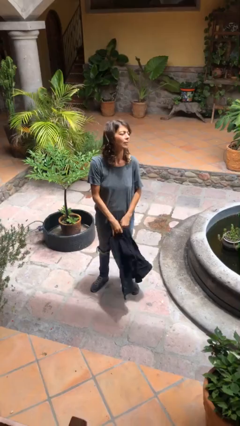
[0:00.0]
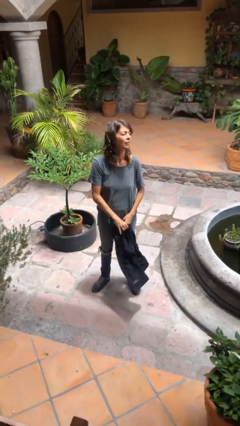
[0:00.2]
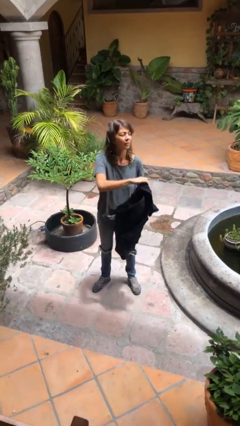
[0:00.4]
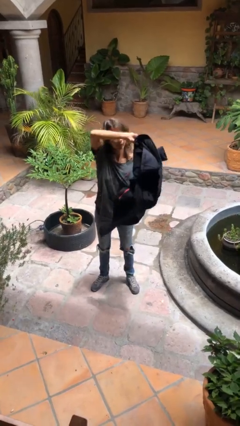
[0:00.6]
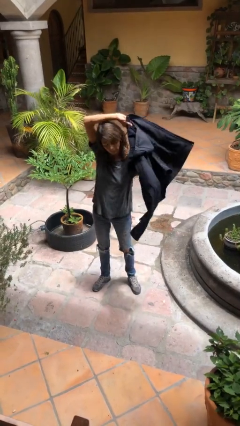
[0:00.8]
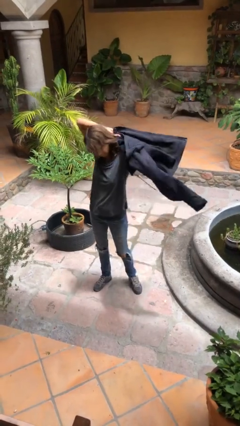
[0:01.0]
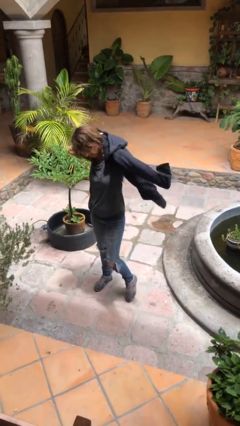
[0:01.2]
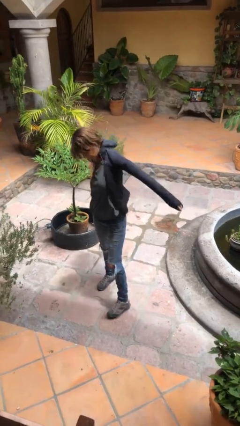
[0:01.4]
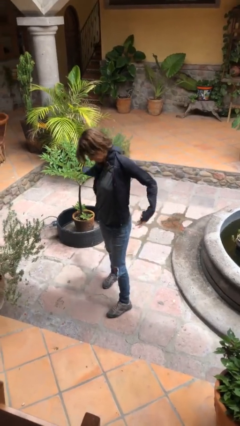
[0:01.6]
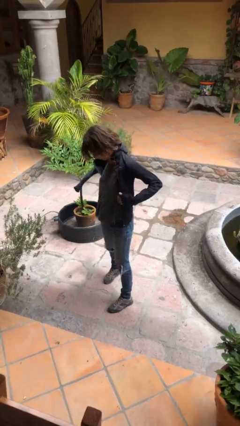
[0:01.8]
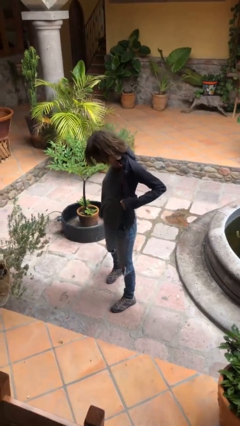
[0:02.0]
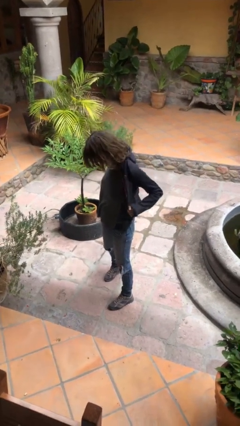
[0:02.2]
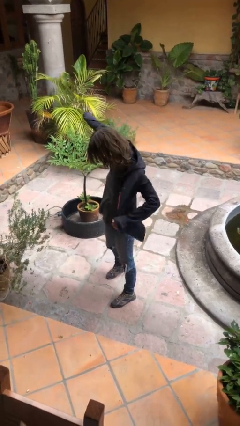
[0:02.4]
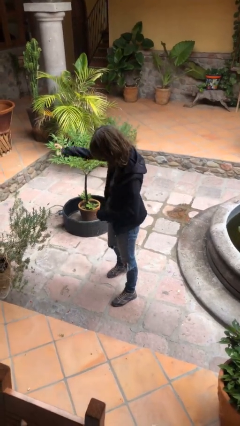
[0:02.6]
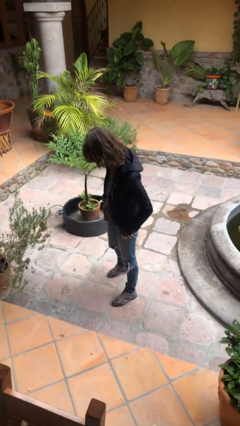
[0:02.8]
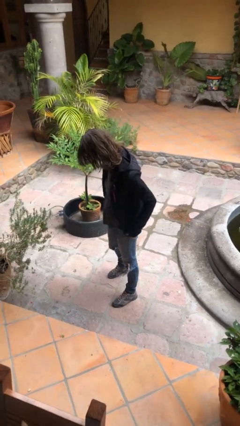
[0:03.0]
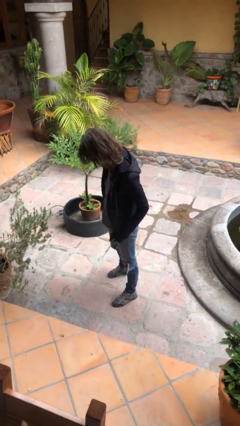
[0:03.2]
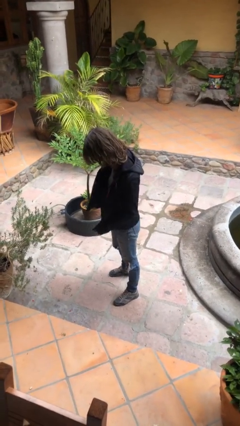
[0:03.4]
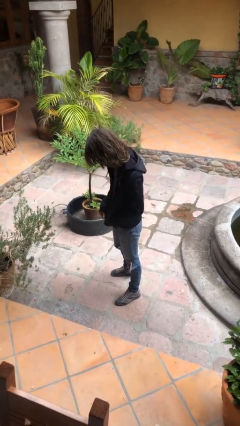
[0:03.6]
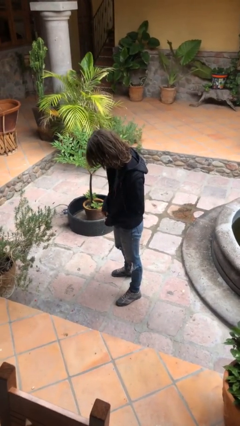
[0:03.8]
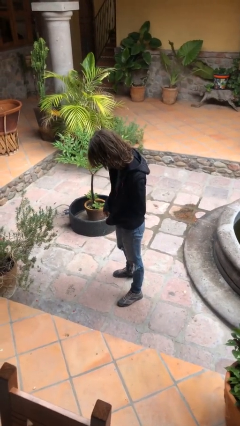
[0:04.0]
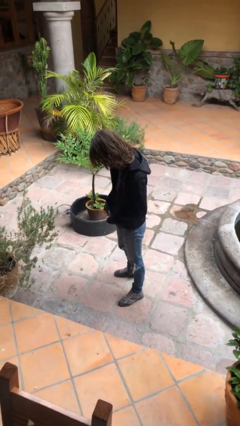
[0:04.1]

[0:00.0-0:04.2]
person puts on jacket

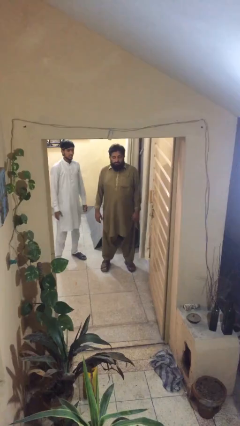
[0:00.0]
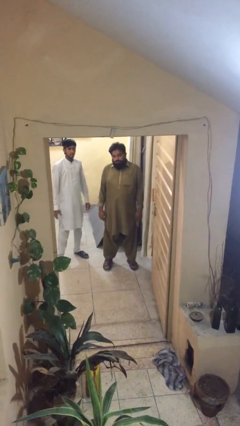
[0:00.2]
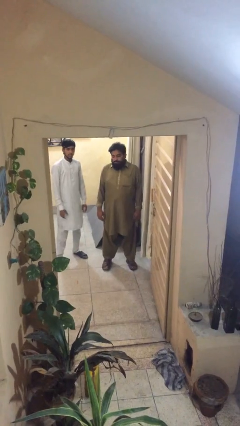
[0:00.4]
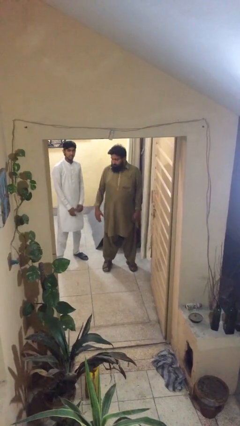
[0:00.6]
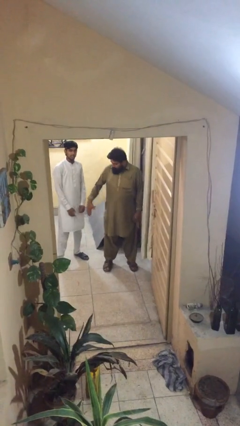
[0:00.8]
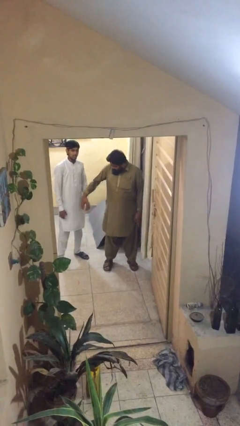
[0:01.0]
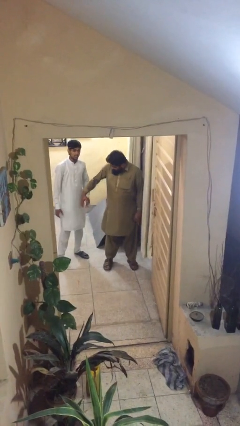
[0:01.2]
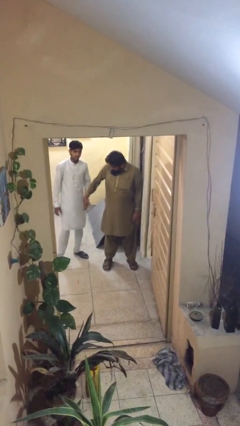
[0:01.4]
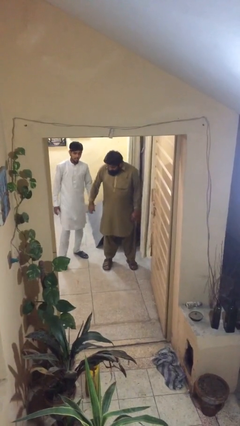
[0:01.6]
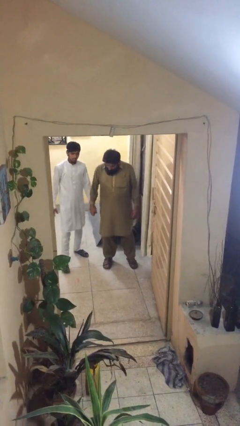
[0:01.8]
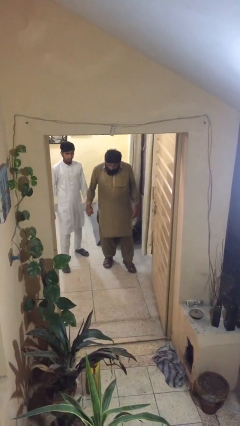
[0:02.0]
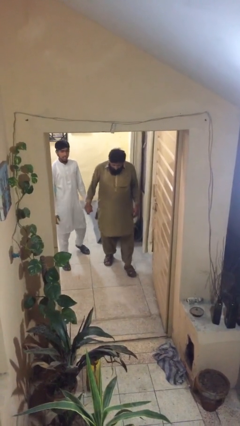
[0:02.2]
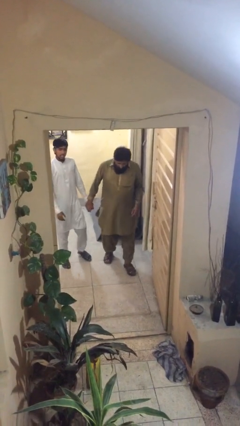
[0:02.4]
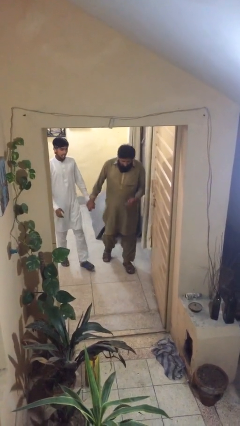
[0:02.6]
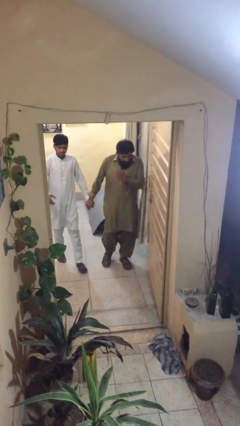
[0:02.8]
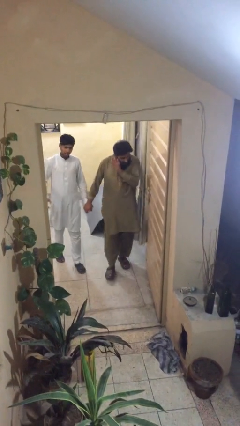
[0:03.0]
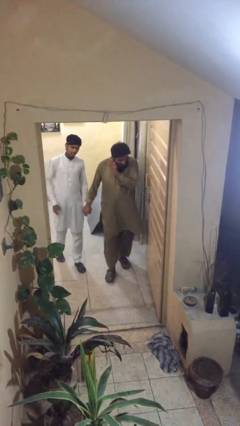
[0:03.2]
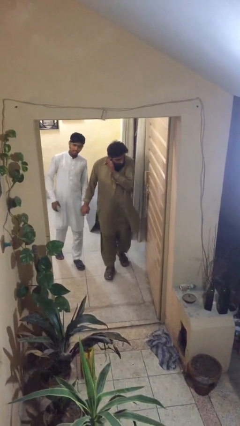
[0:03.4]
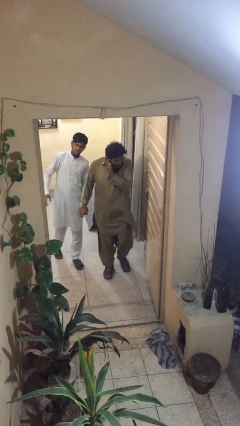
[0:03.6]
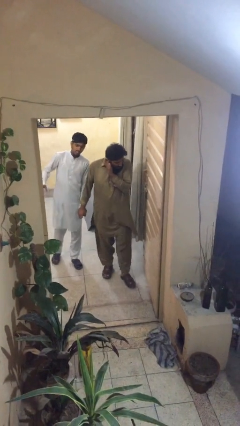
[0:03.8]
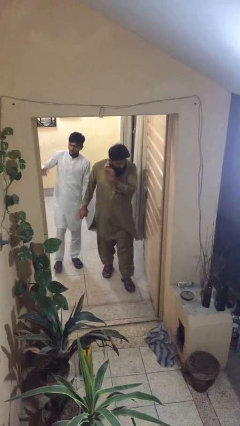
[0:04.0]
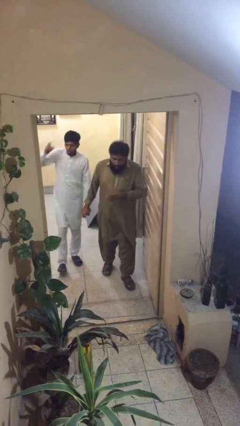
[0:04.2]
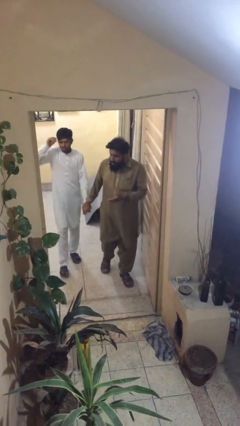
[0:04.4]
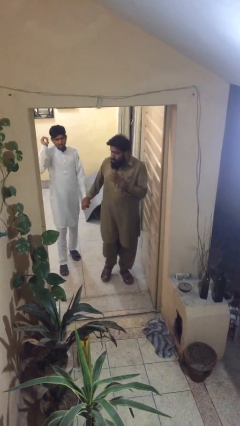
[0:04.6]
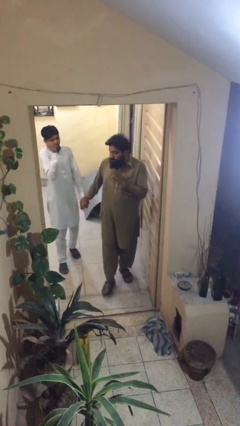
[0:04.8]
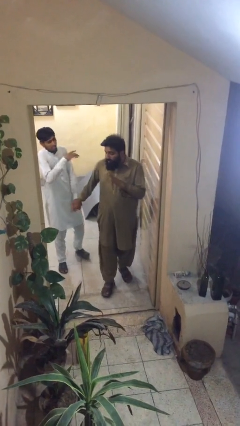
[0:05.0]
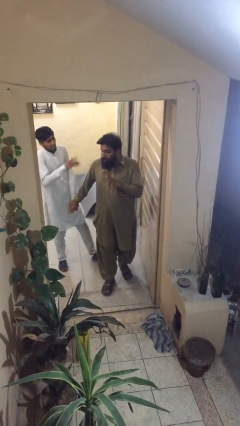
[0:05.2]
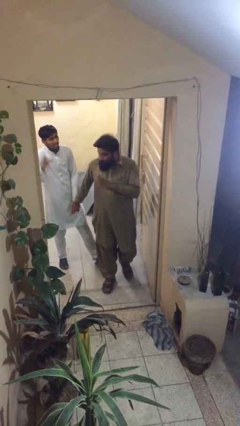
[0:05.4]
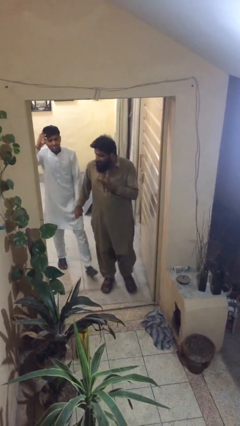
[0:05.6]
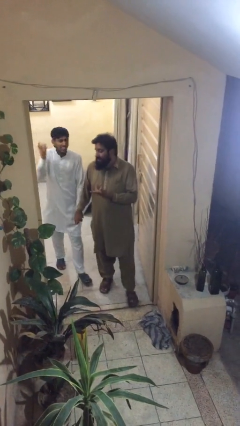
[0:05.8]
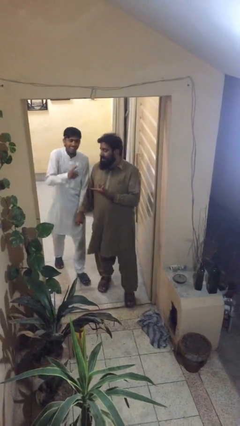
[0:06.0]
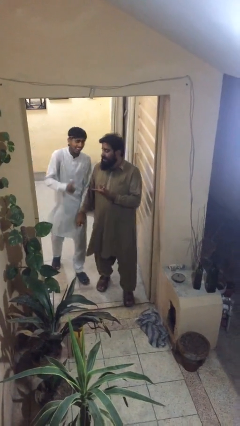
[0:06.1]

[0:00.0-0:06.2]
person holds hand

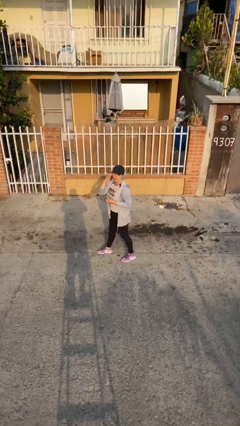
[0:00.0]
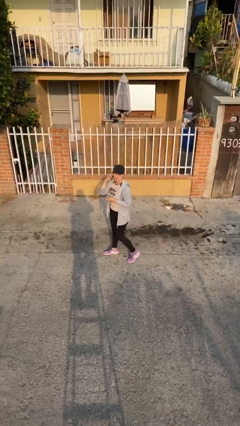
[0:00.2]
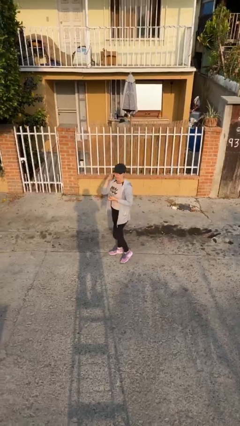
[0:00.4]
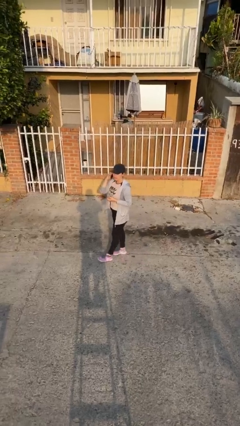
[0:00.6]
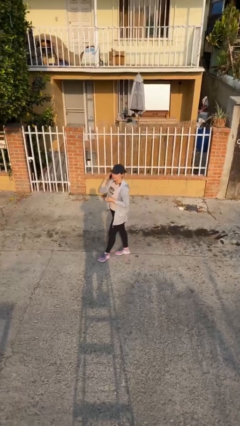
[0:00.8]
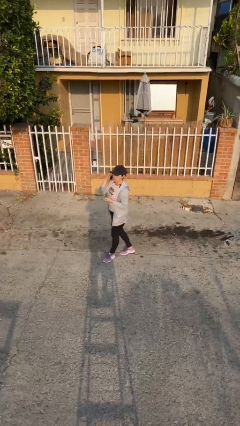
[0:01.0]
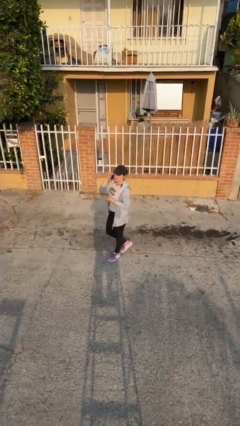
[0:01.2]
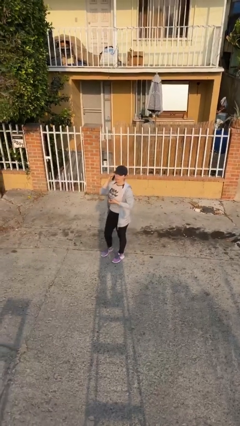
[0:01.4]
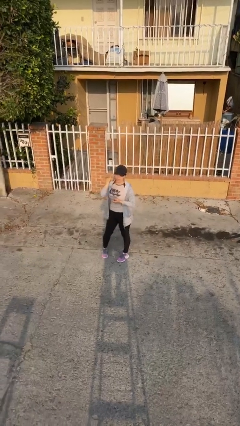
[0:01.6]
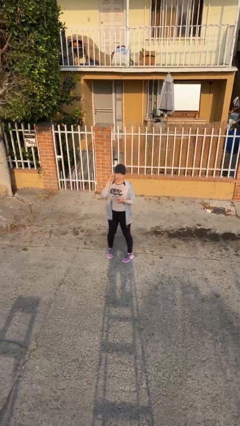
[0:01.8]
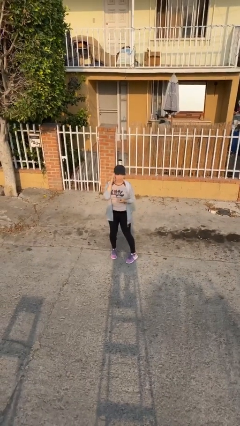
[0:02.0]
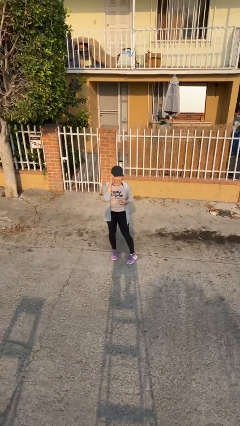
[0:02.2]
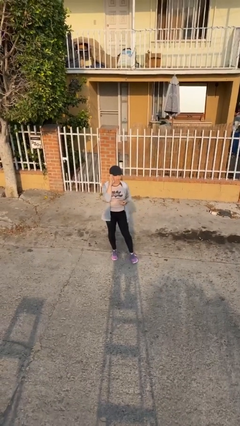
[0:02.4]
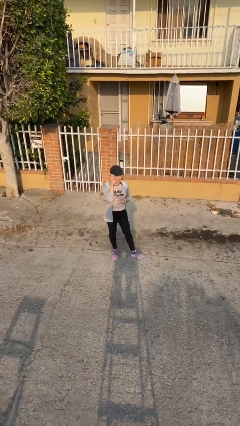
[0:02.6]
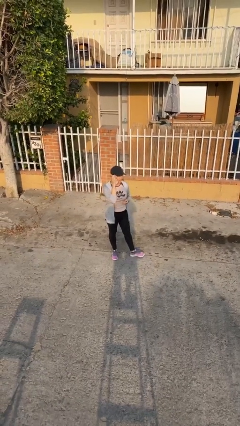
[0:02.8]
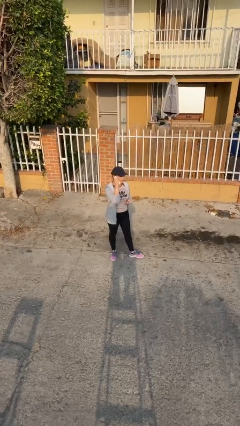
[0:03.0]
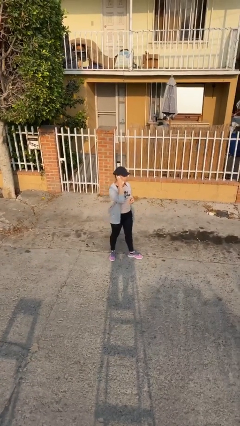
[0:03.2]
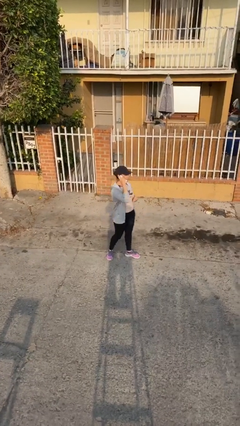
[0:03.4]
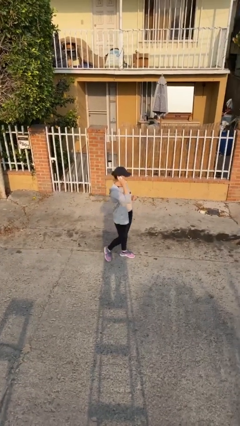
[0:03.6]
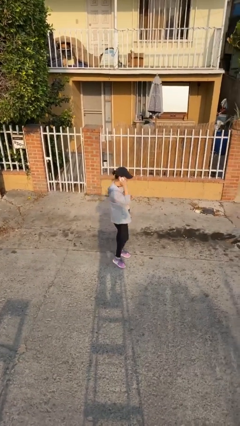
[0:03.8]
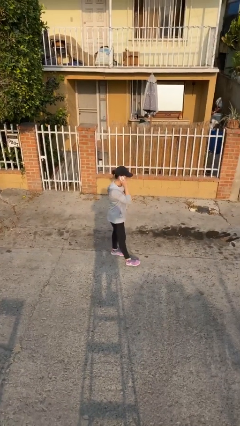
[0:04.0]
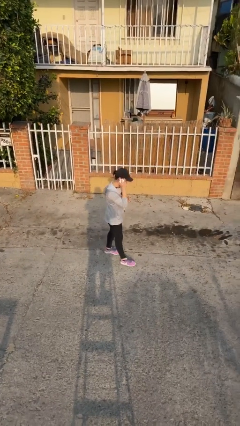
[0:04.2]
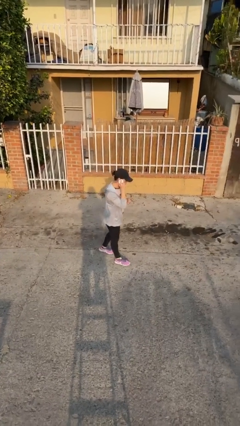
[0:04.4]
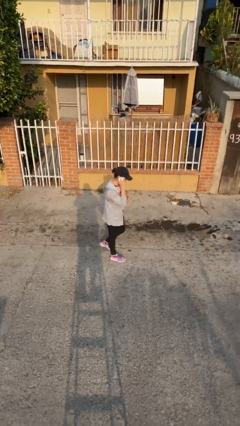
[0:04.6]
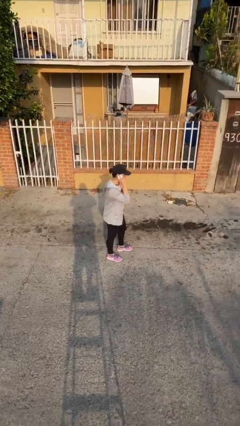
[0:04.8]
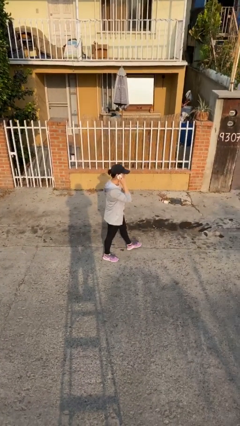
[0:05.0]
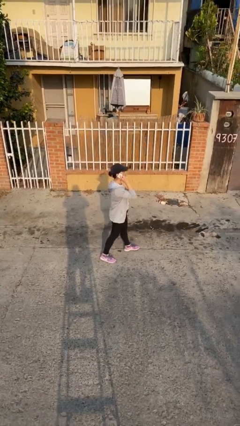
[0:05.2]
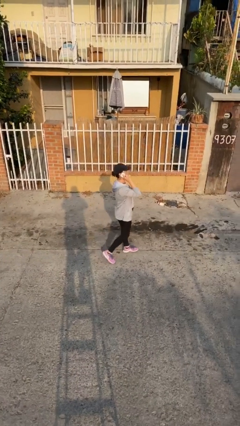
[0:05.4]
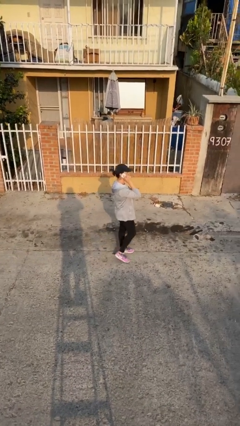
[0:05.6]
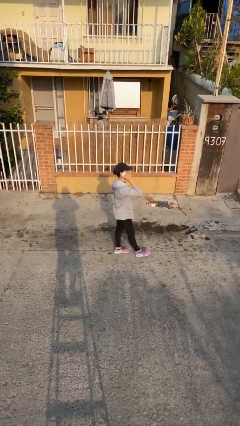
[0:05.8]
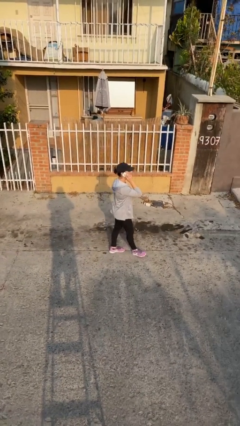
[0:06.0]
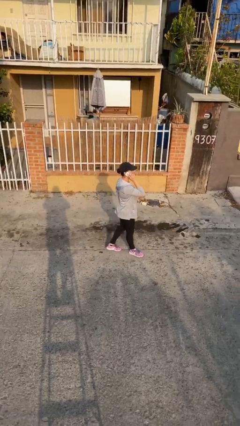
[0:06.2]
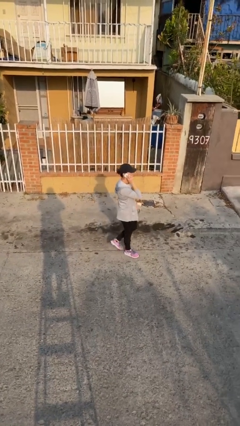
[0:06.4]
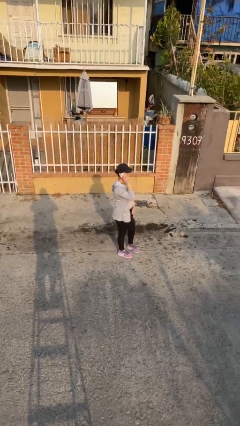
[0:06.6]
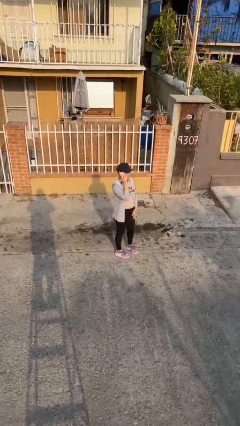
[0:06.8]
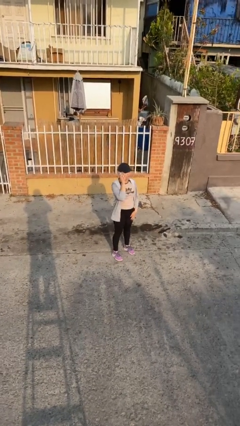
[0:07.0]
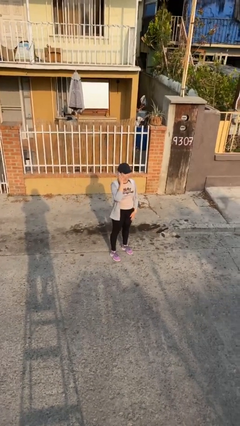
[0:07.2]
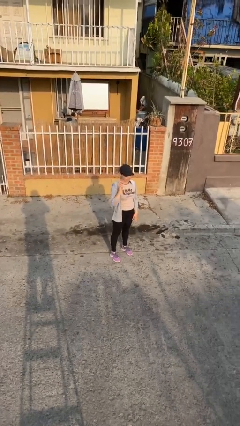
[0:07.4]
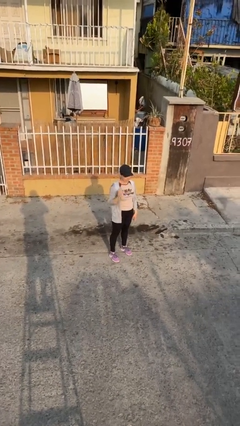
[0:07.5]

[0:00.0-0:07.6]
person talks on phone
